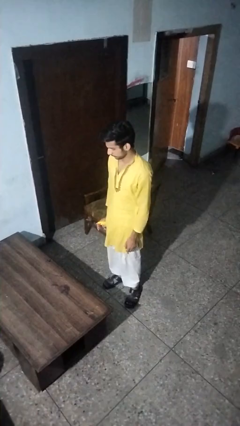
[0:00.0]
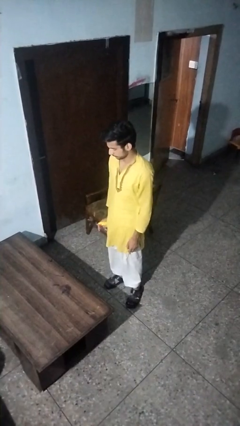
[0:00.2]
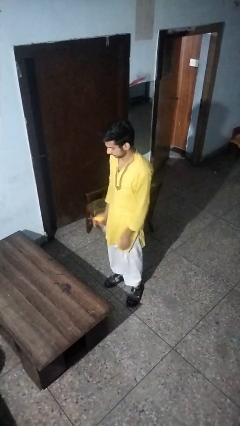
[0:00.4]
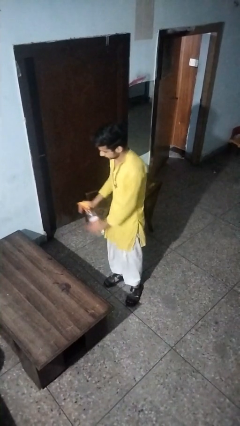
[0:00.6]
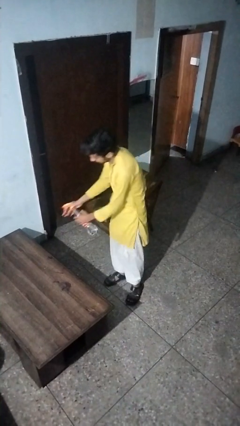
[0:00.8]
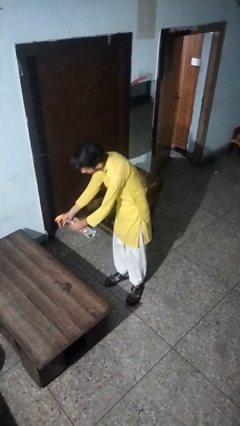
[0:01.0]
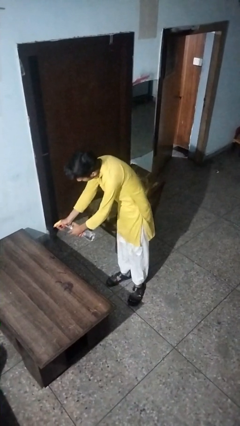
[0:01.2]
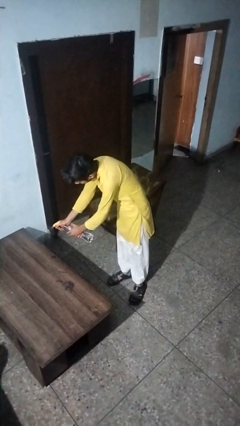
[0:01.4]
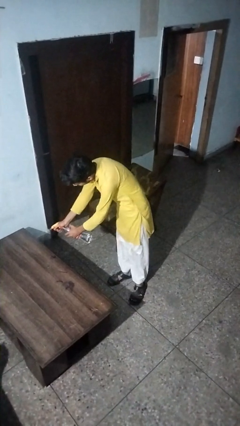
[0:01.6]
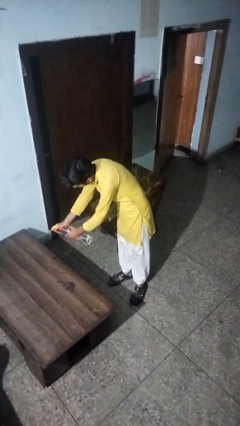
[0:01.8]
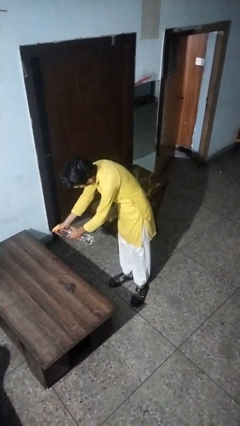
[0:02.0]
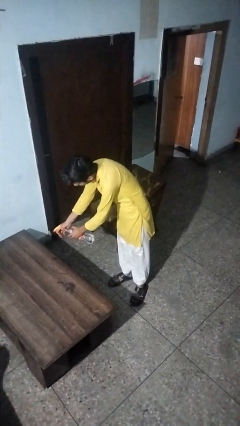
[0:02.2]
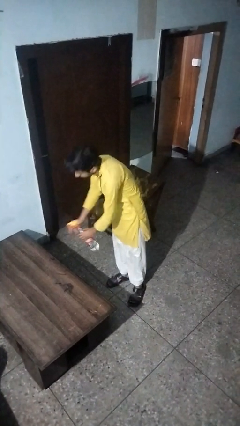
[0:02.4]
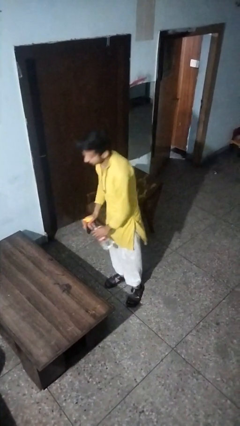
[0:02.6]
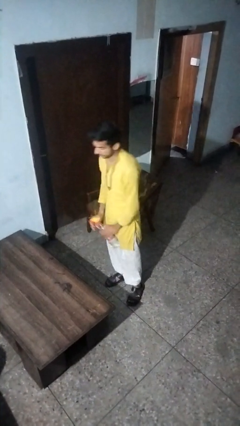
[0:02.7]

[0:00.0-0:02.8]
person sprays from bottle

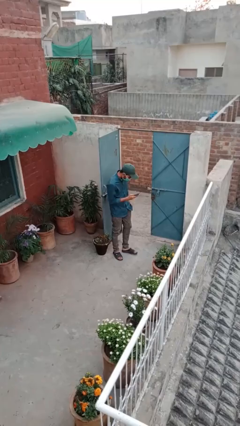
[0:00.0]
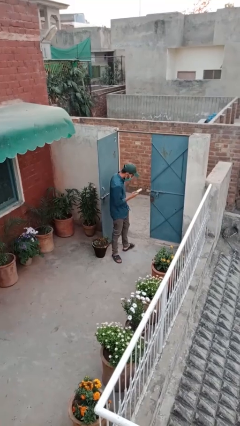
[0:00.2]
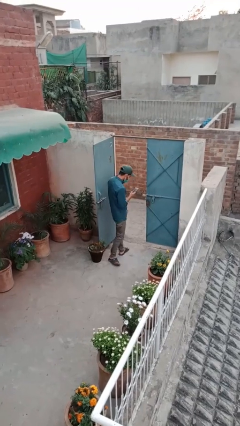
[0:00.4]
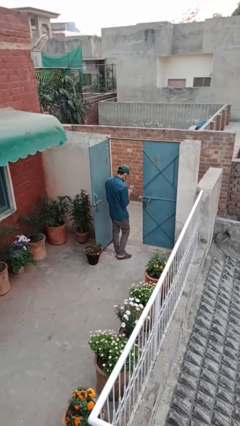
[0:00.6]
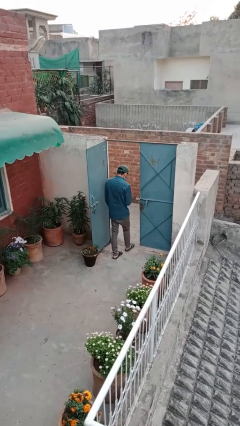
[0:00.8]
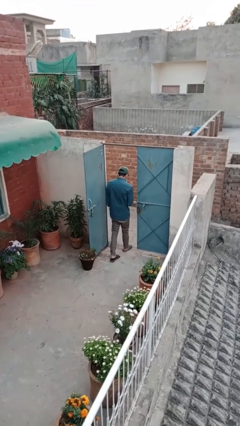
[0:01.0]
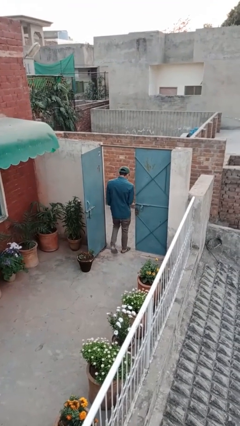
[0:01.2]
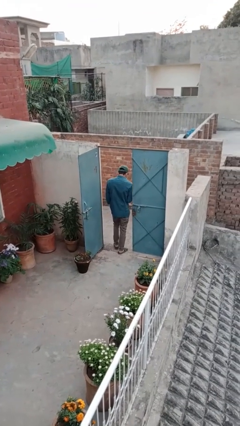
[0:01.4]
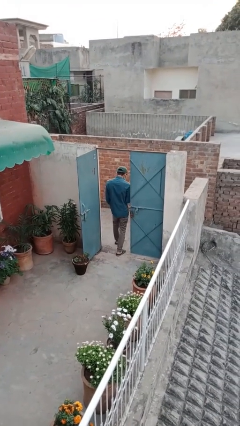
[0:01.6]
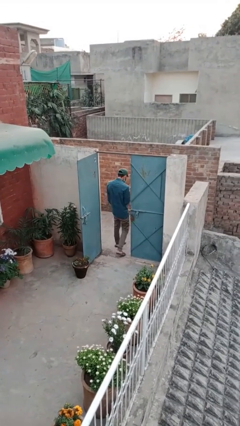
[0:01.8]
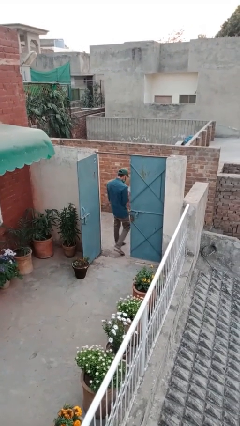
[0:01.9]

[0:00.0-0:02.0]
person exits scene through structure

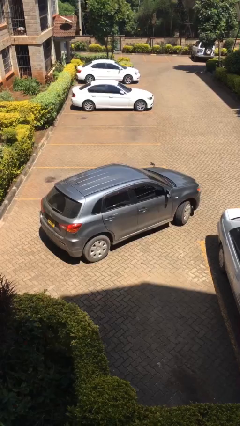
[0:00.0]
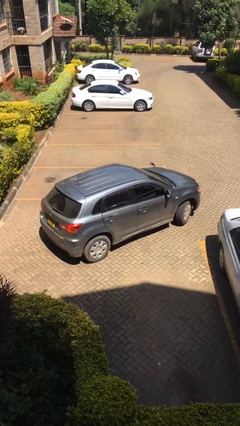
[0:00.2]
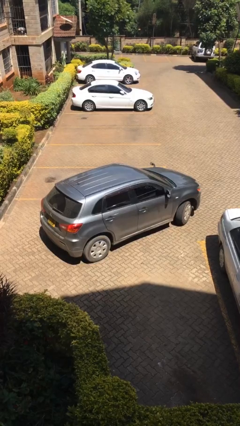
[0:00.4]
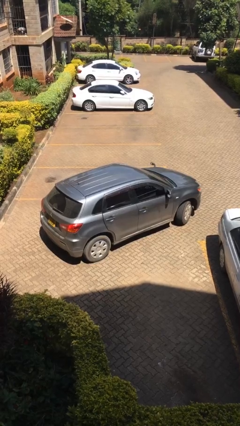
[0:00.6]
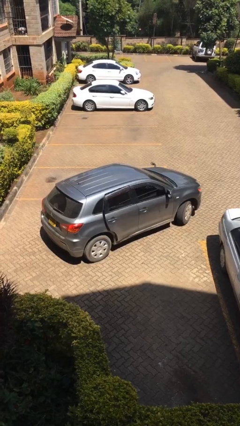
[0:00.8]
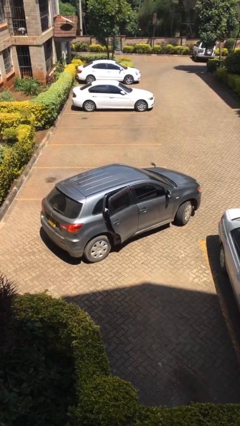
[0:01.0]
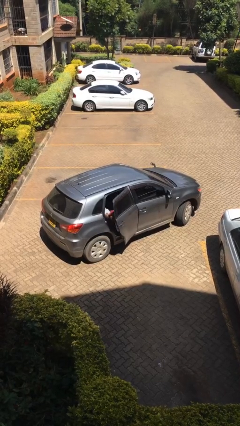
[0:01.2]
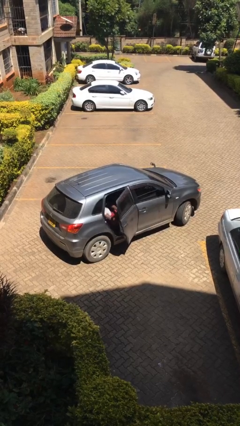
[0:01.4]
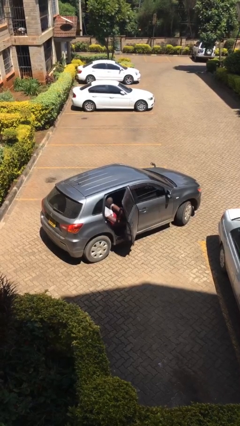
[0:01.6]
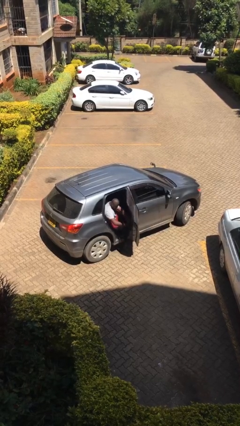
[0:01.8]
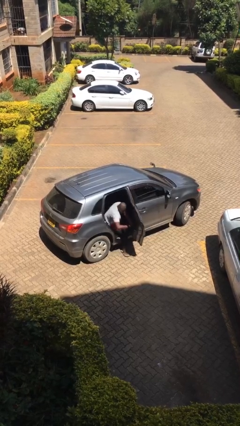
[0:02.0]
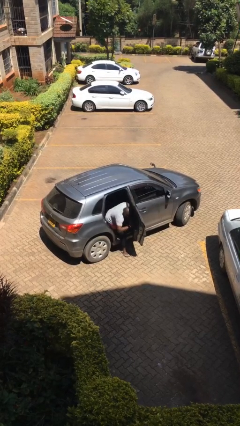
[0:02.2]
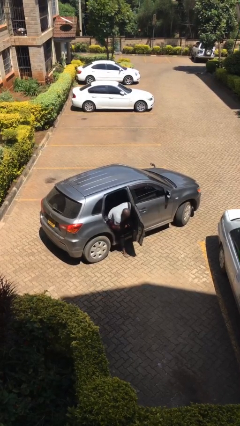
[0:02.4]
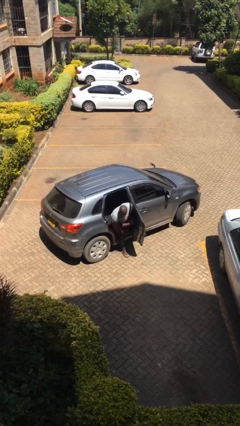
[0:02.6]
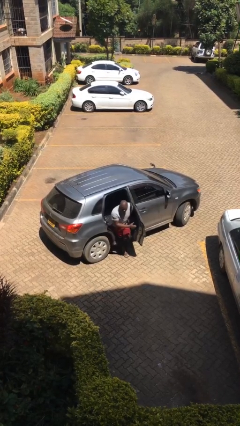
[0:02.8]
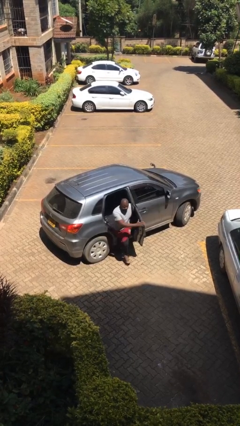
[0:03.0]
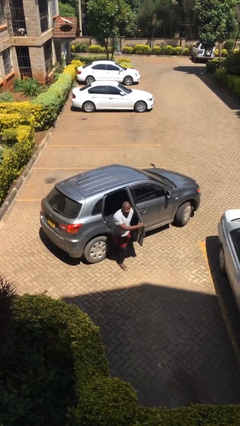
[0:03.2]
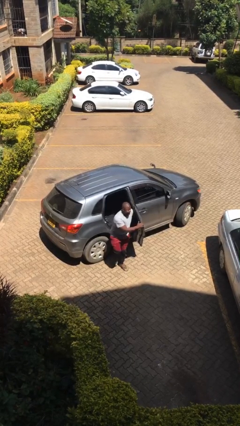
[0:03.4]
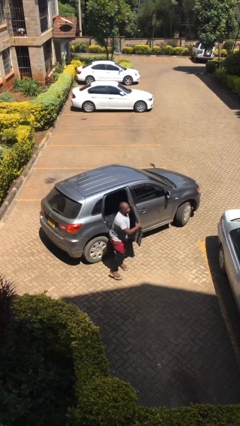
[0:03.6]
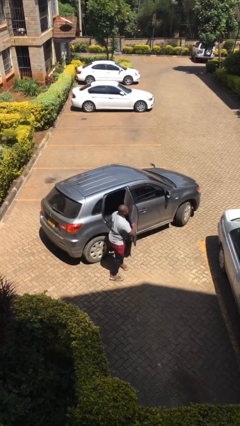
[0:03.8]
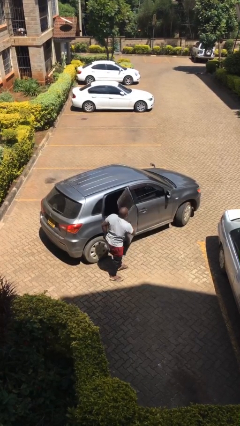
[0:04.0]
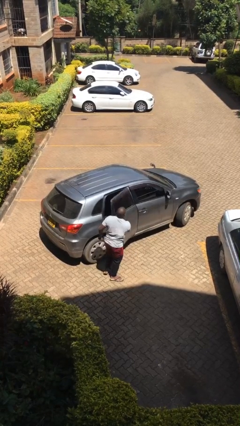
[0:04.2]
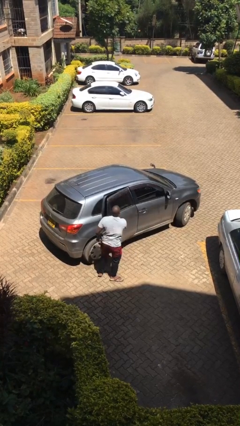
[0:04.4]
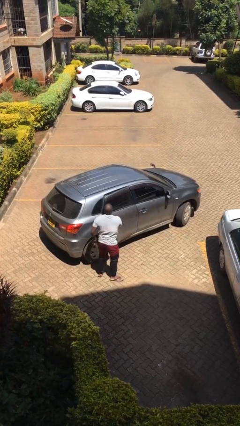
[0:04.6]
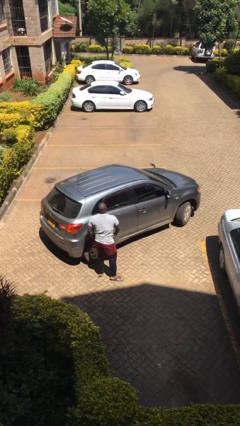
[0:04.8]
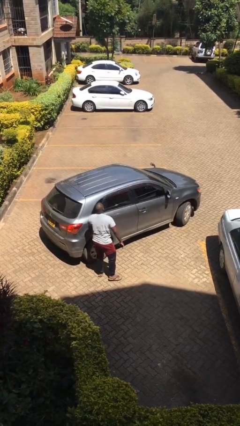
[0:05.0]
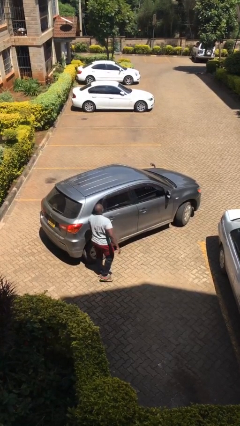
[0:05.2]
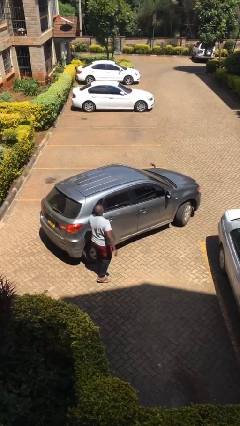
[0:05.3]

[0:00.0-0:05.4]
car drops off person

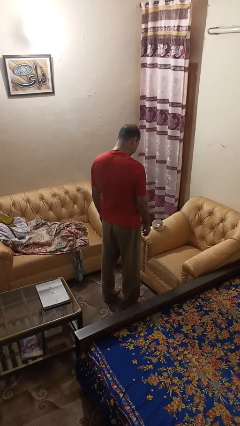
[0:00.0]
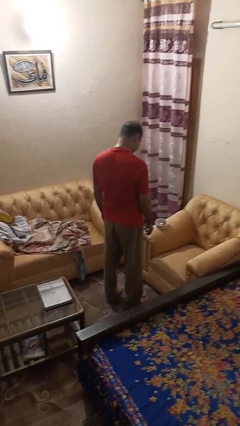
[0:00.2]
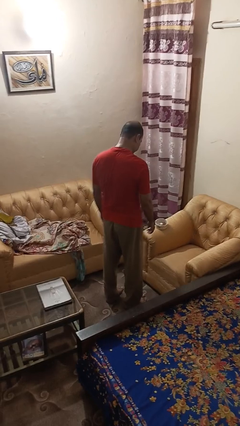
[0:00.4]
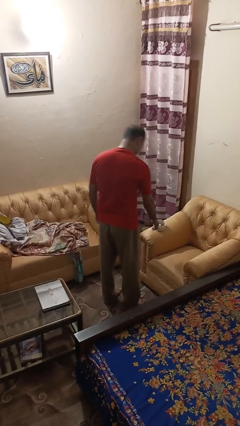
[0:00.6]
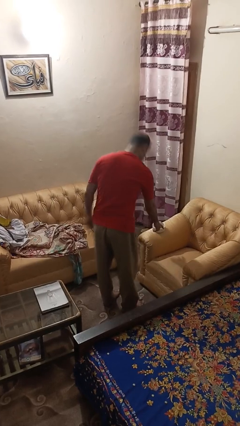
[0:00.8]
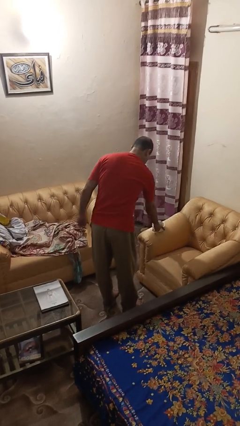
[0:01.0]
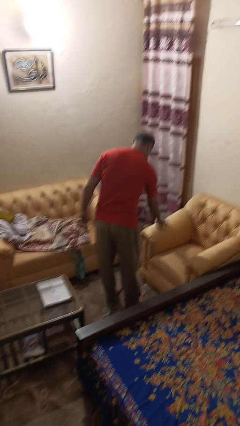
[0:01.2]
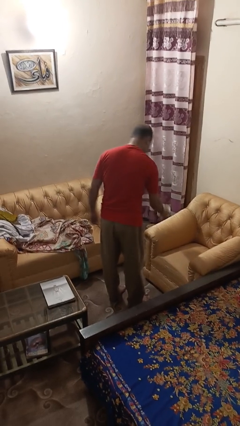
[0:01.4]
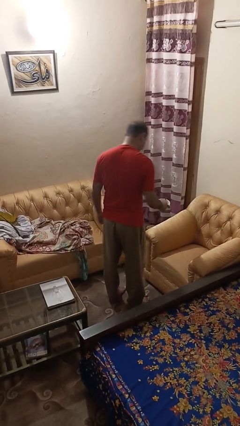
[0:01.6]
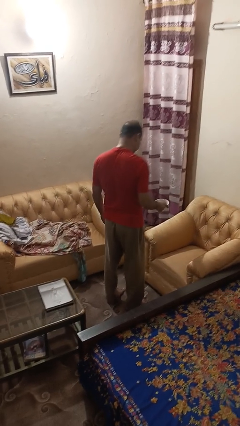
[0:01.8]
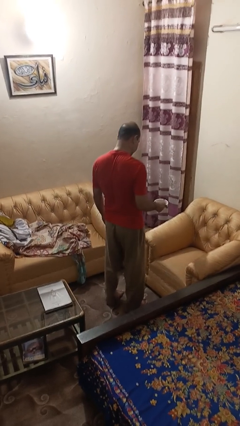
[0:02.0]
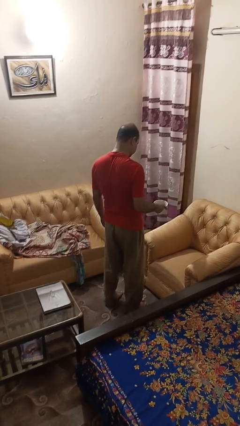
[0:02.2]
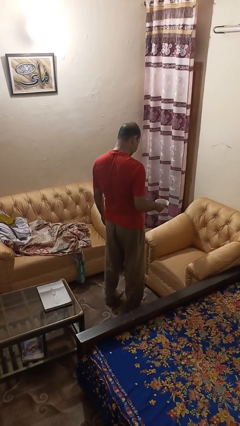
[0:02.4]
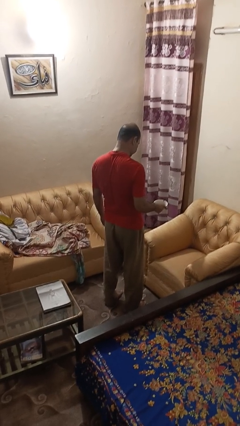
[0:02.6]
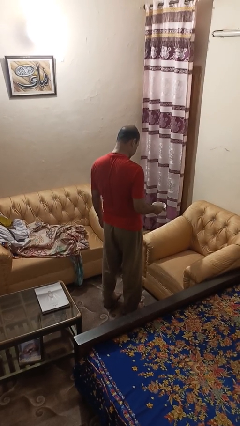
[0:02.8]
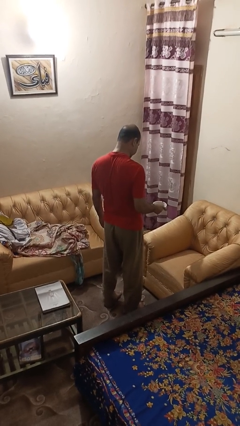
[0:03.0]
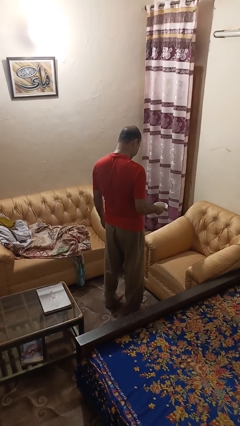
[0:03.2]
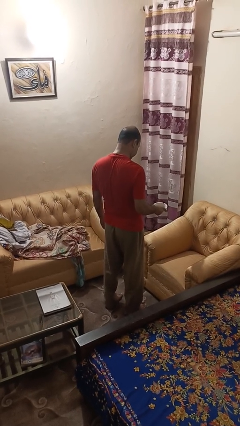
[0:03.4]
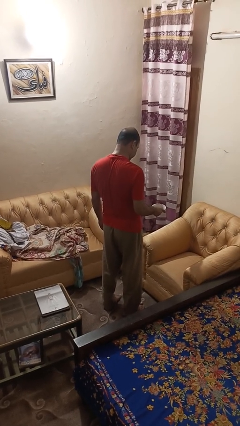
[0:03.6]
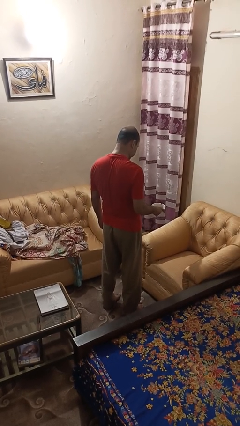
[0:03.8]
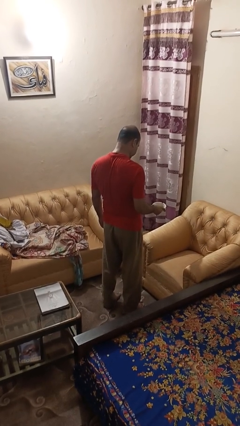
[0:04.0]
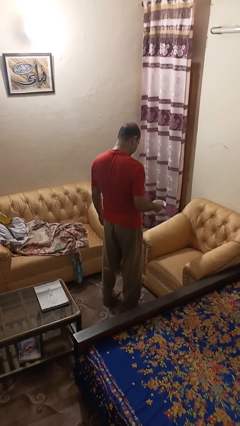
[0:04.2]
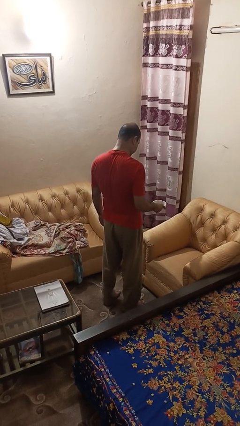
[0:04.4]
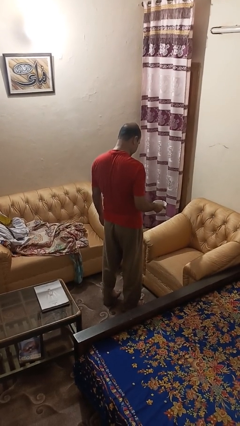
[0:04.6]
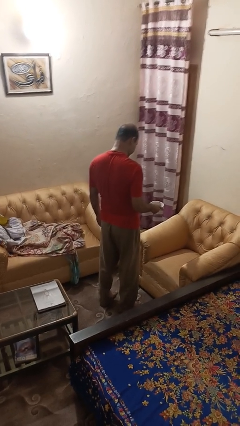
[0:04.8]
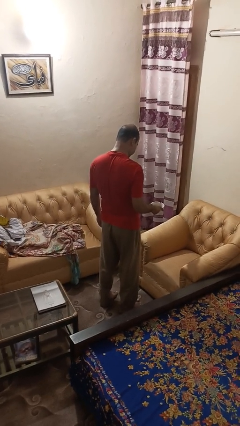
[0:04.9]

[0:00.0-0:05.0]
person picks up object from couch

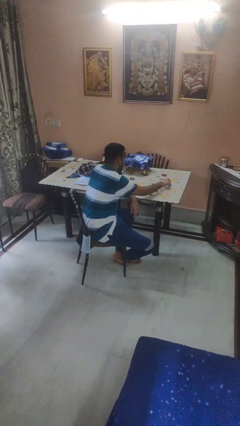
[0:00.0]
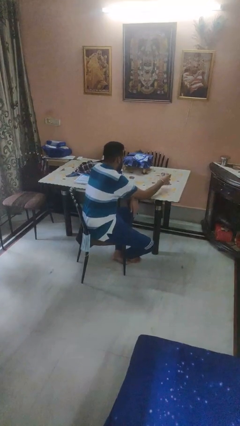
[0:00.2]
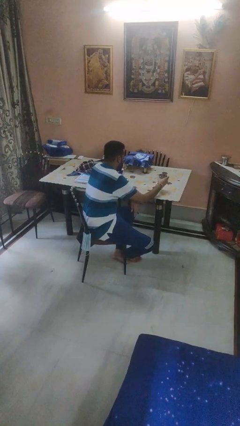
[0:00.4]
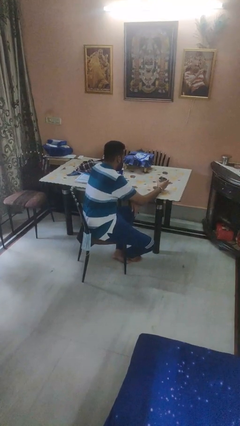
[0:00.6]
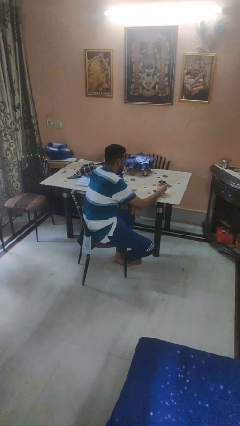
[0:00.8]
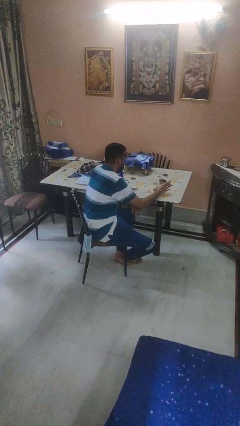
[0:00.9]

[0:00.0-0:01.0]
person sets upright glass

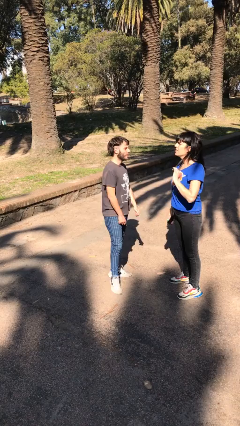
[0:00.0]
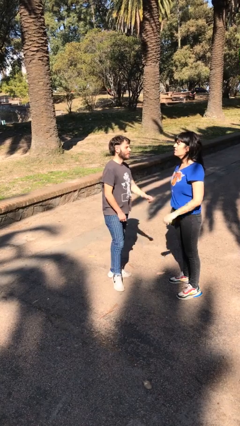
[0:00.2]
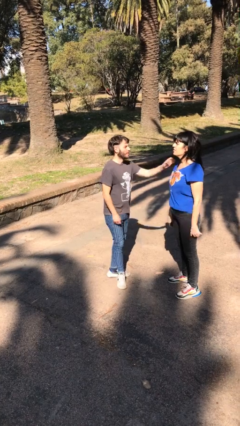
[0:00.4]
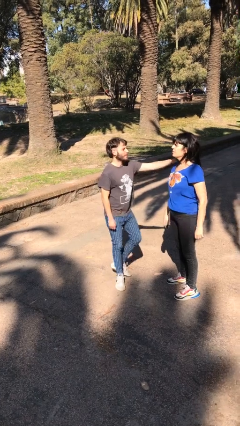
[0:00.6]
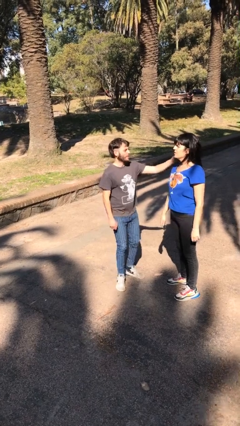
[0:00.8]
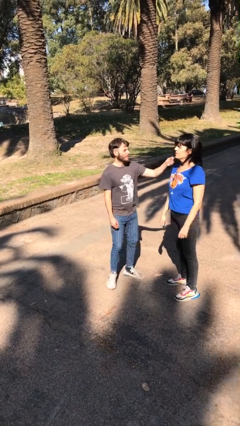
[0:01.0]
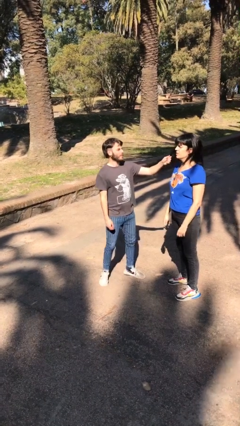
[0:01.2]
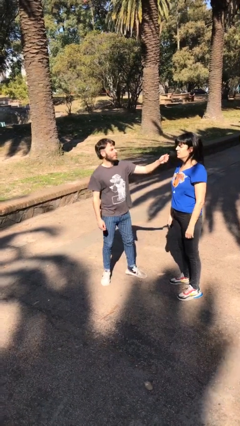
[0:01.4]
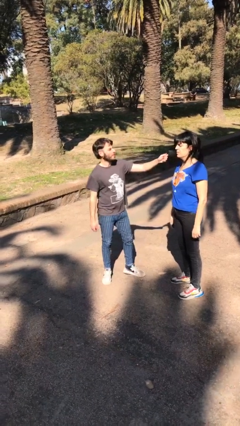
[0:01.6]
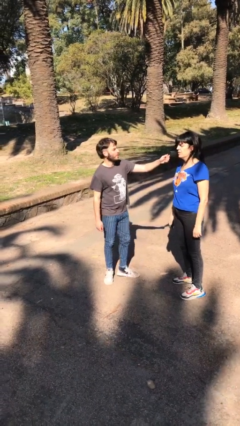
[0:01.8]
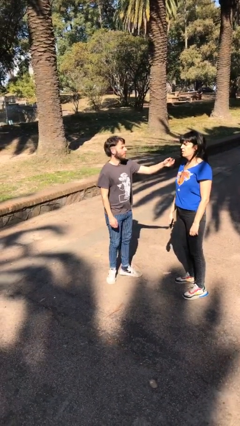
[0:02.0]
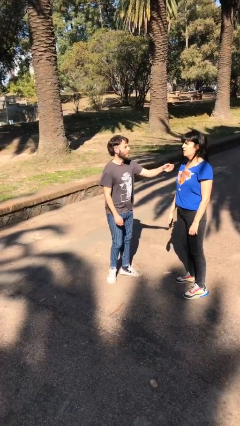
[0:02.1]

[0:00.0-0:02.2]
person grabs person by hair
